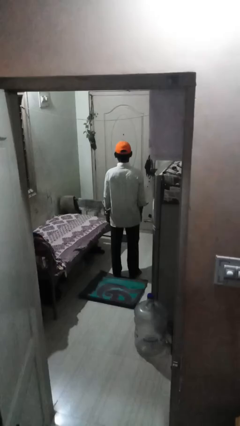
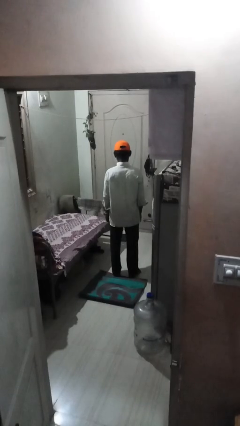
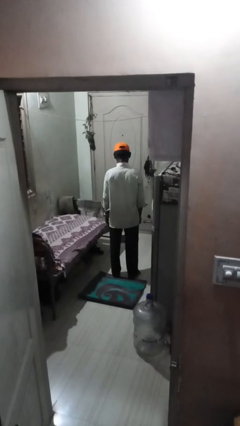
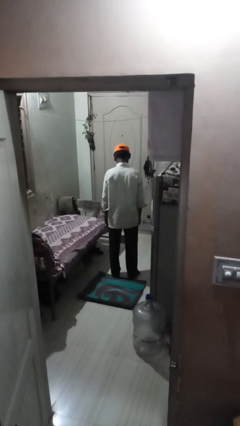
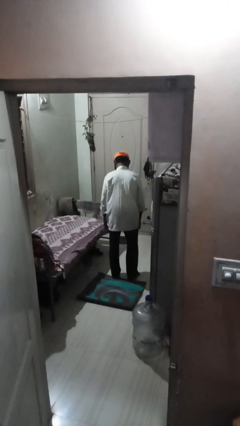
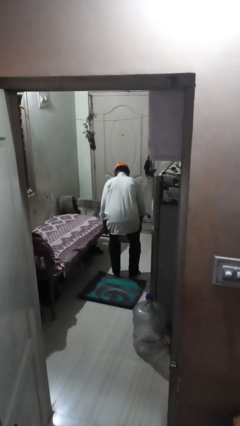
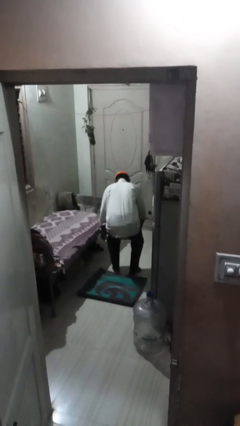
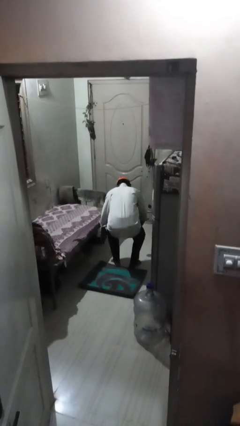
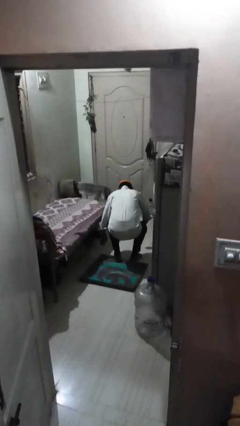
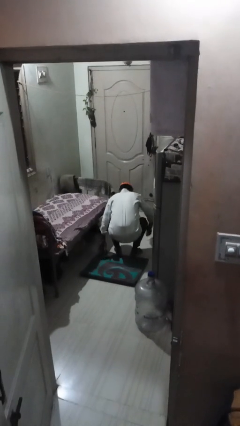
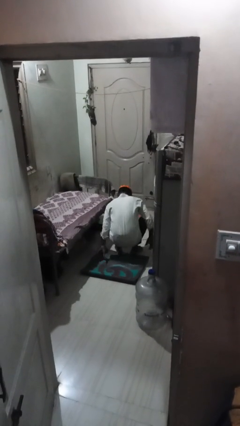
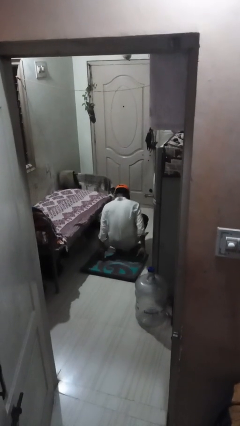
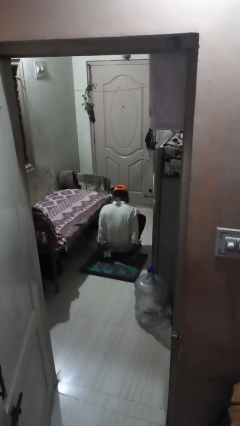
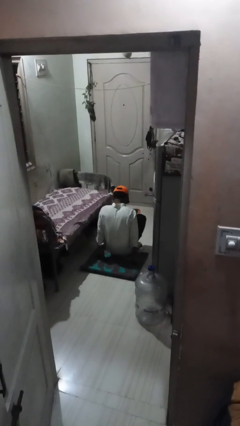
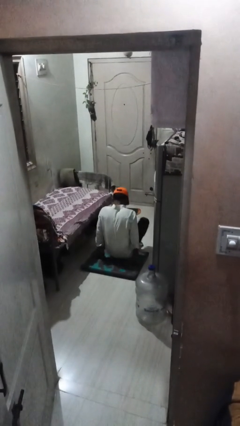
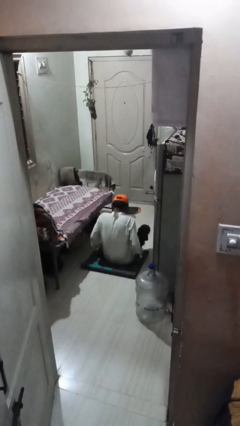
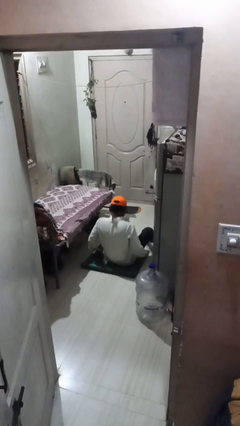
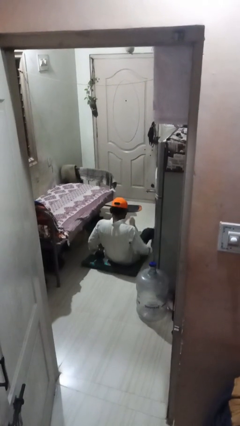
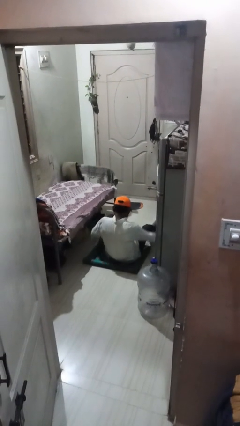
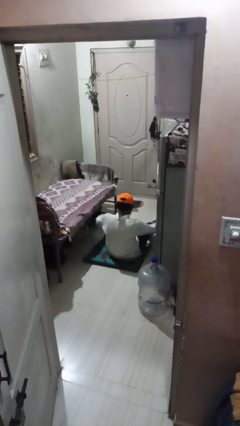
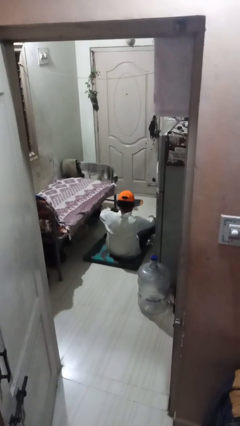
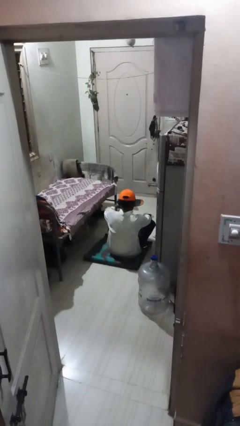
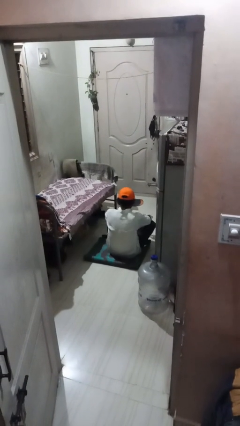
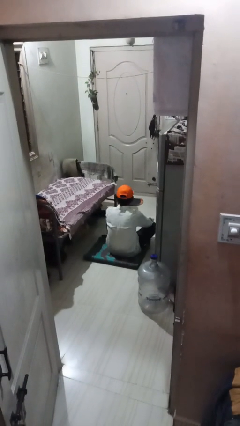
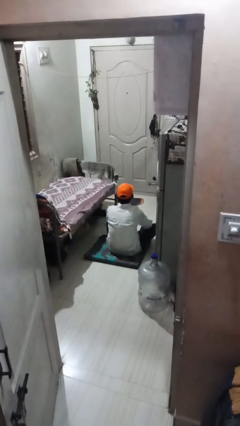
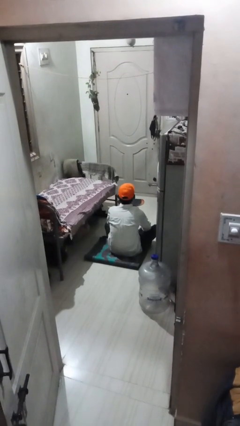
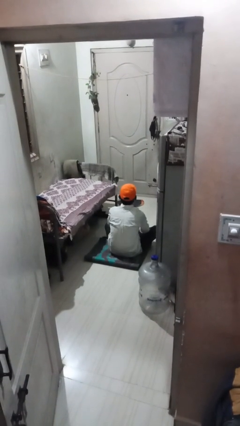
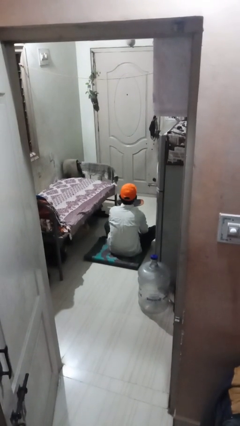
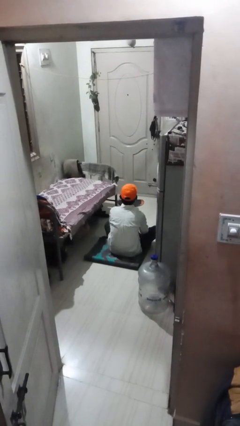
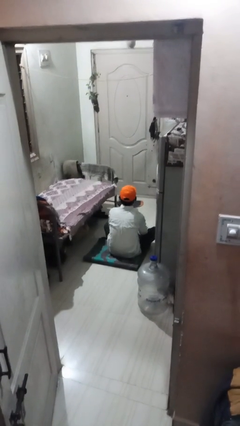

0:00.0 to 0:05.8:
person sits crisscross

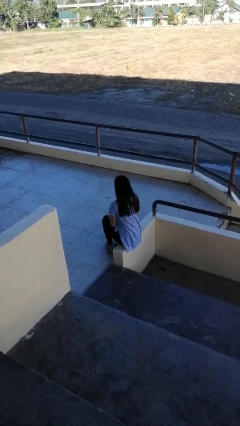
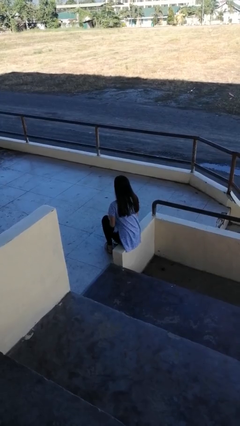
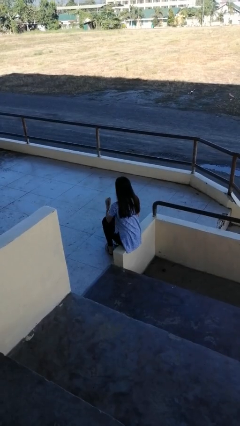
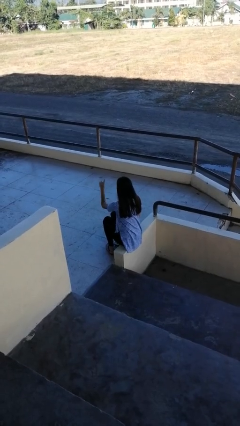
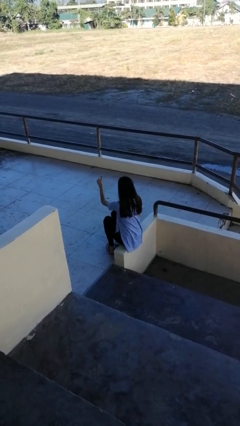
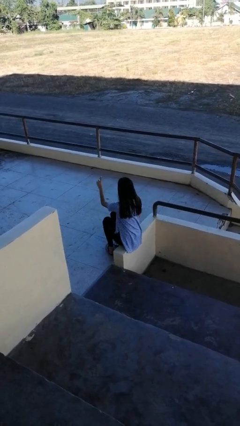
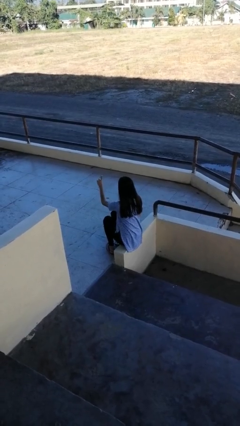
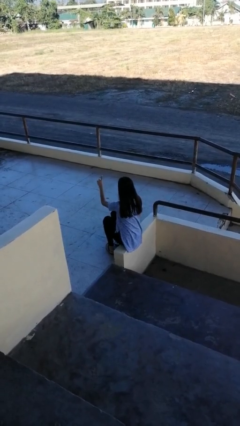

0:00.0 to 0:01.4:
person gestures number one

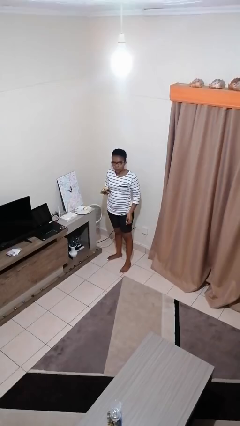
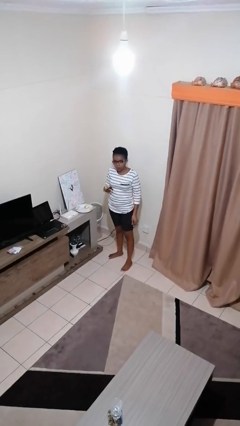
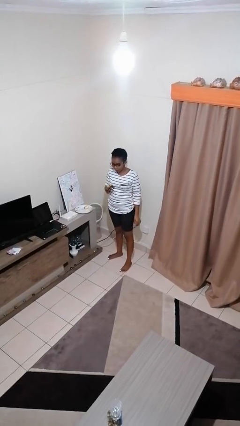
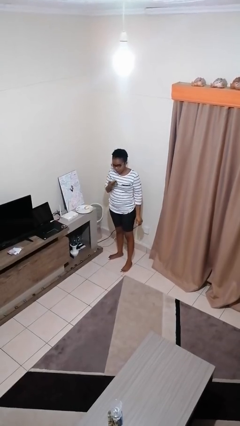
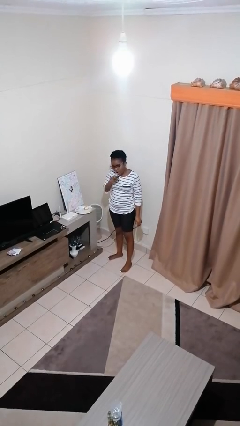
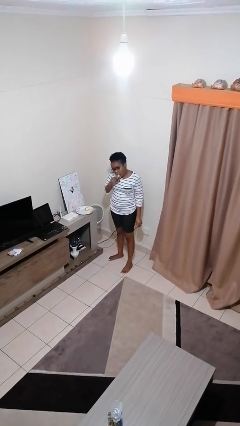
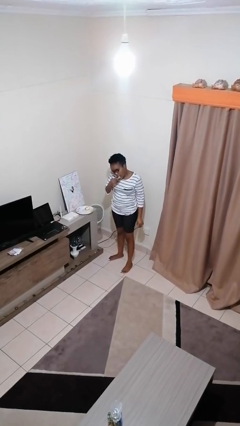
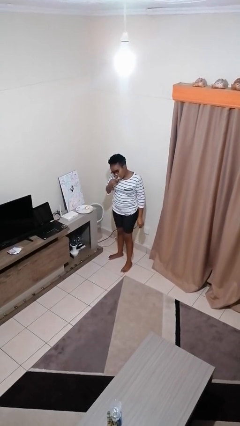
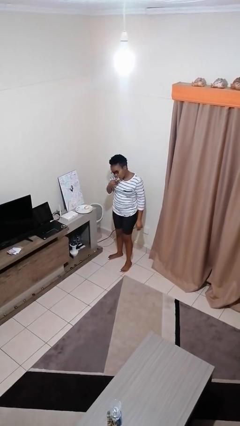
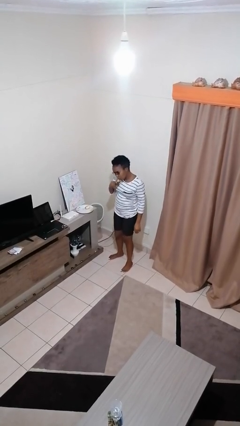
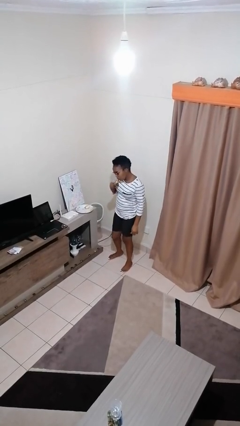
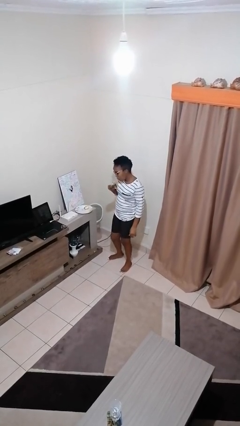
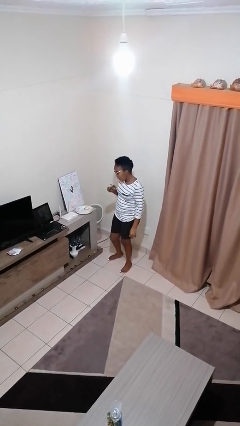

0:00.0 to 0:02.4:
person eats banana

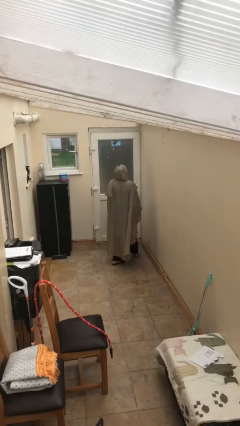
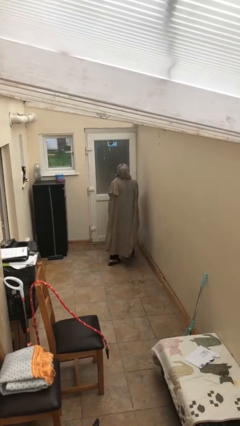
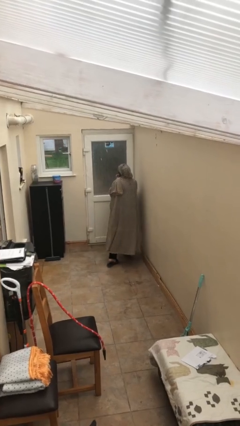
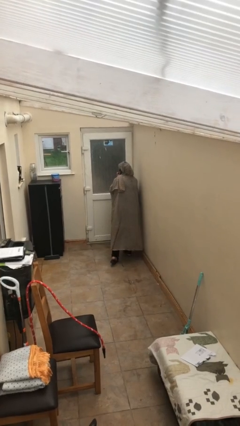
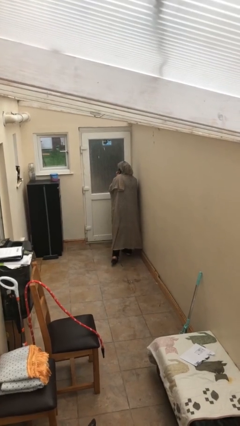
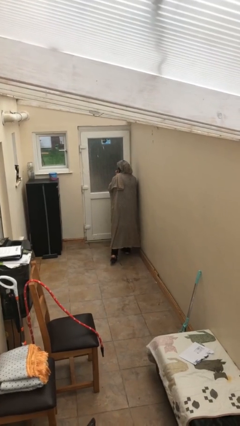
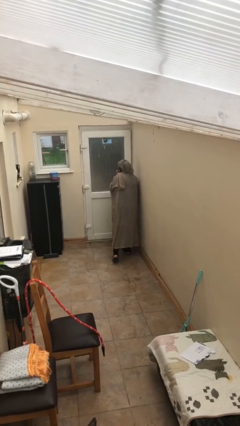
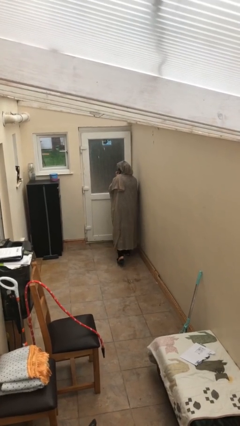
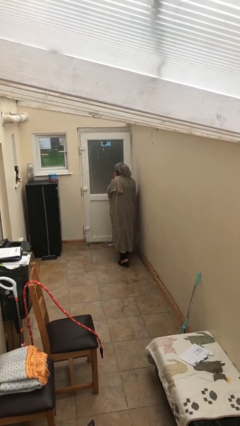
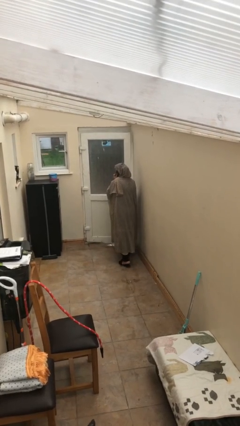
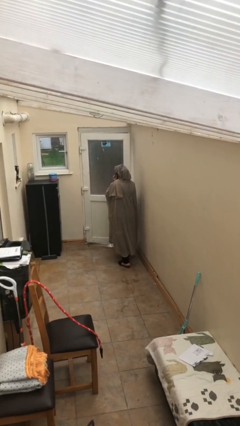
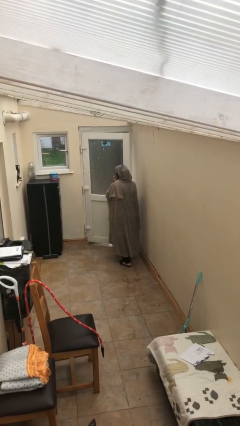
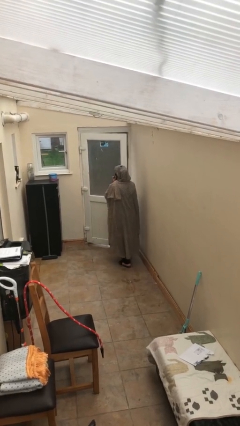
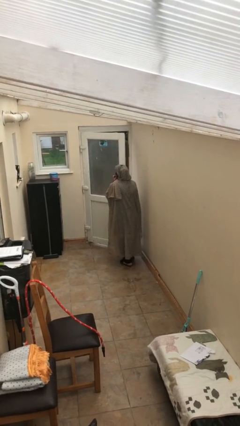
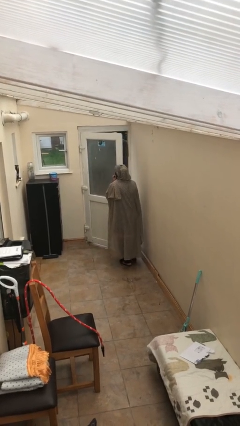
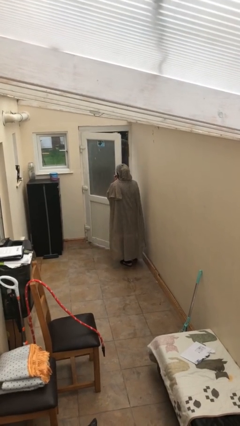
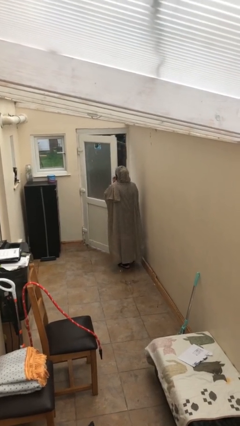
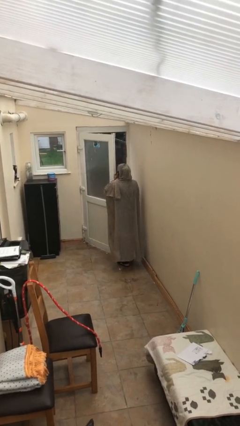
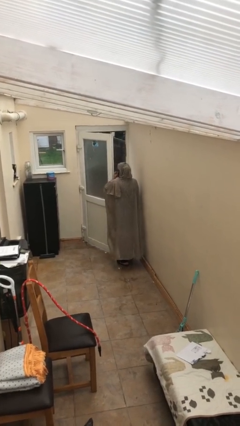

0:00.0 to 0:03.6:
person opens facility door

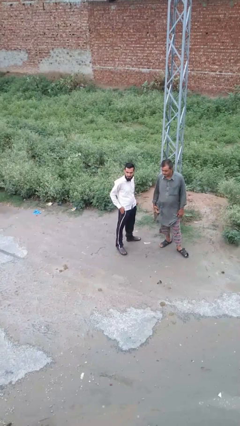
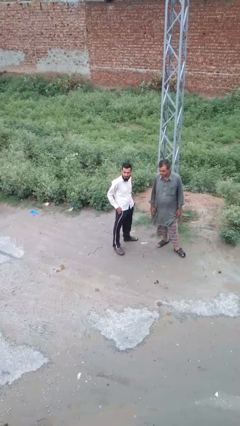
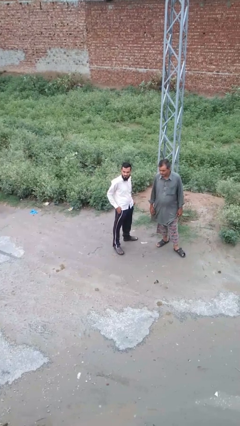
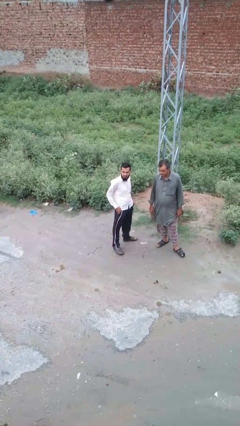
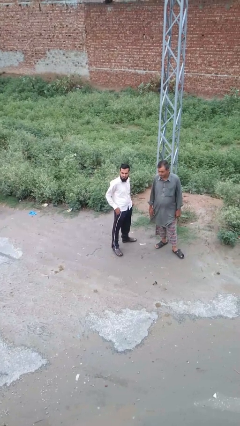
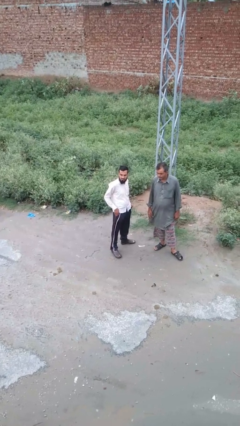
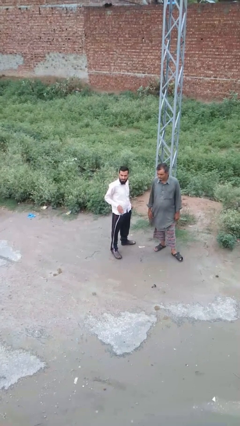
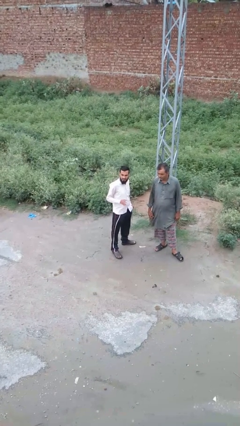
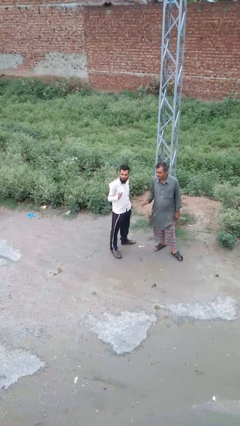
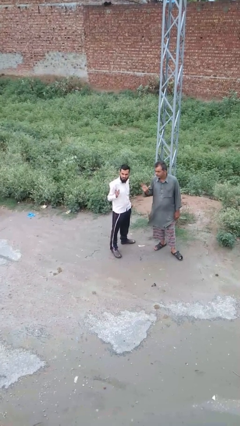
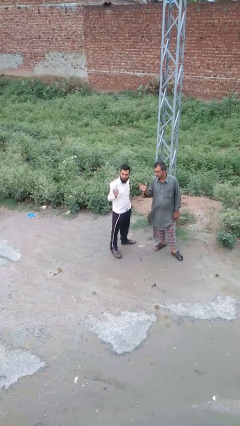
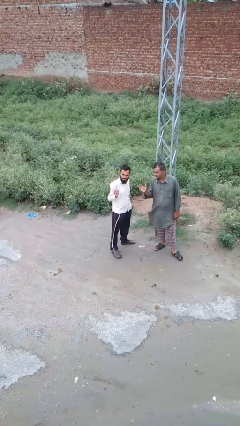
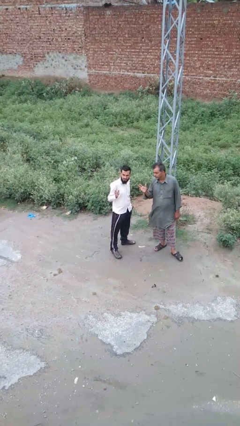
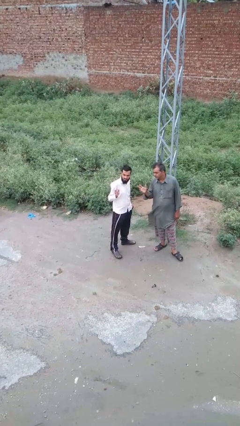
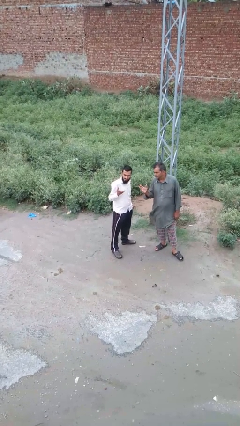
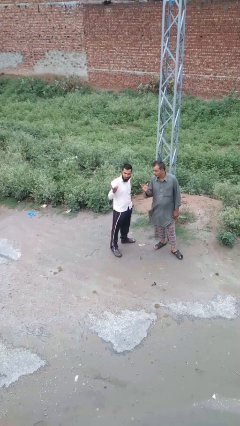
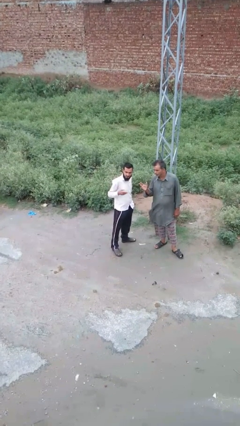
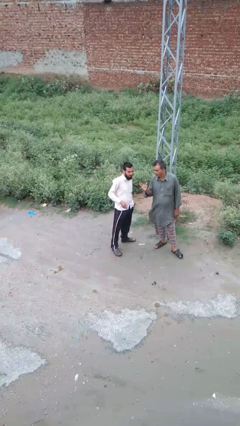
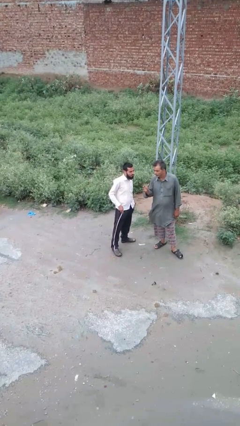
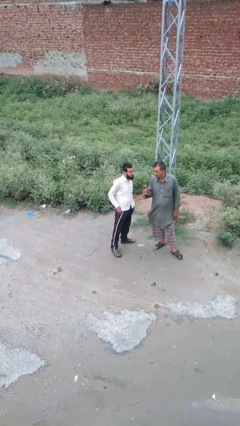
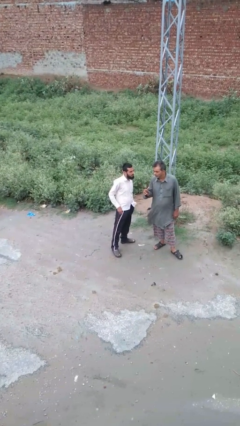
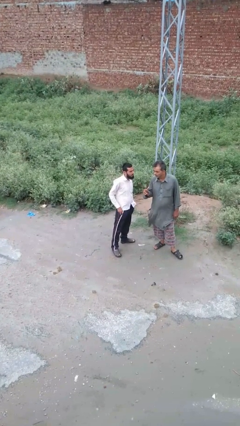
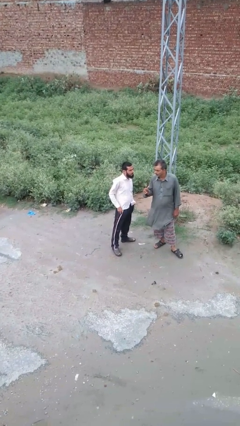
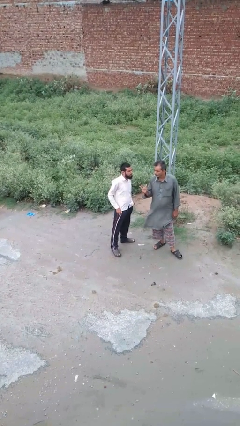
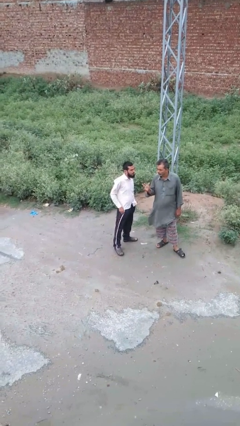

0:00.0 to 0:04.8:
person talks to person
